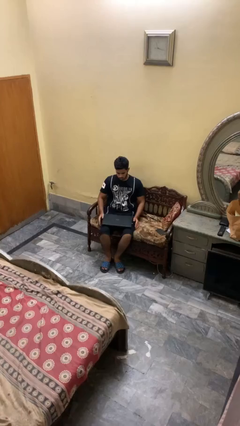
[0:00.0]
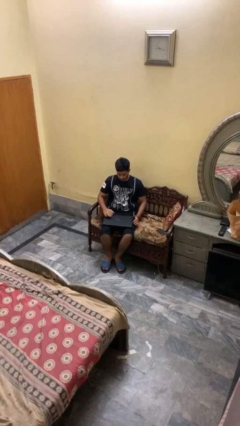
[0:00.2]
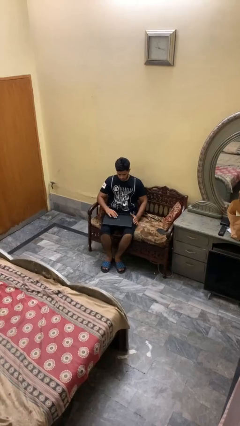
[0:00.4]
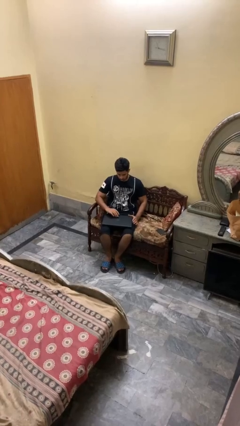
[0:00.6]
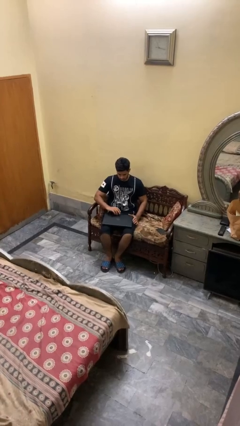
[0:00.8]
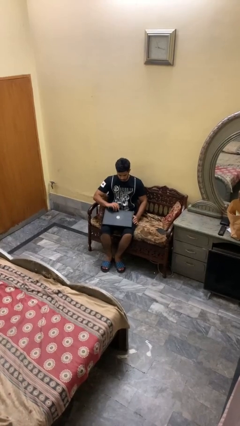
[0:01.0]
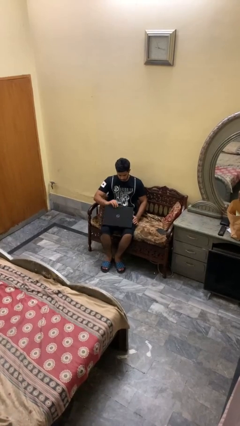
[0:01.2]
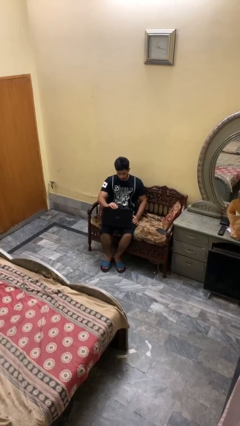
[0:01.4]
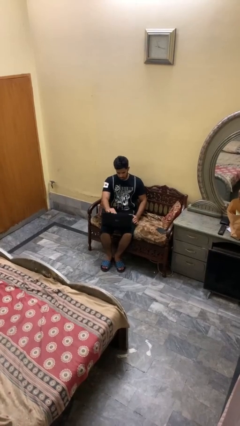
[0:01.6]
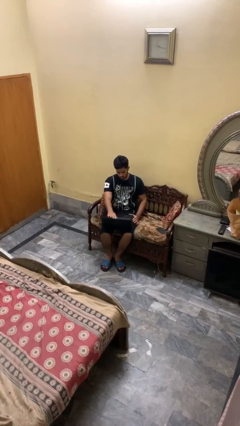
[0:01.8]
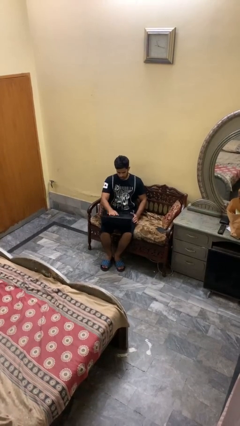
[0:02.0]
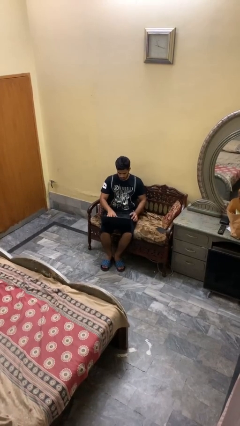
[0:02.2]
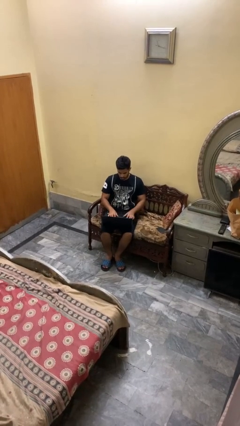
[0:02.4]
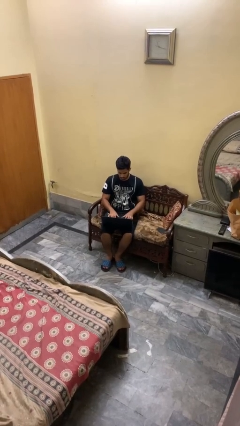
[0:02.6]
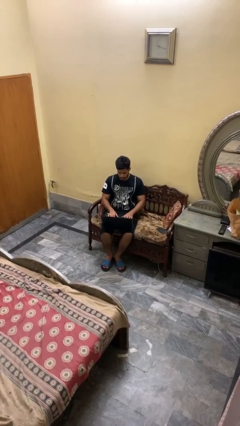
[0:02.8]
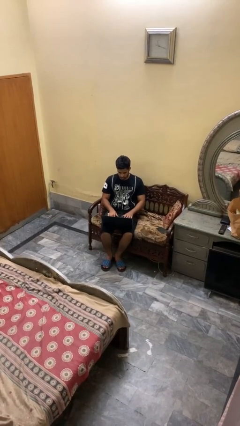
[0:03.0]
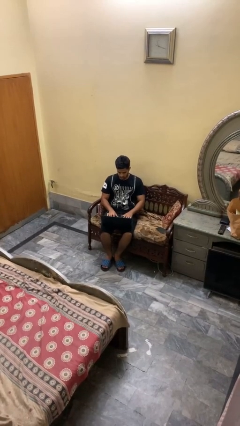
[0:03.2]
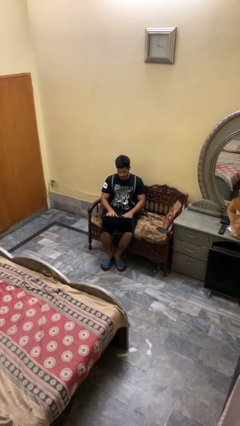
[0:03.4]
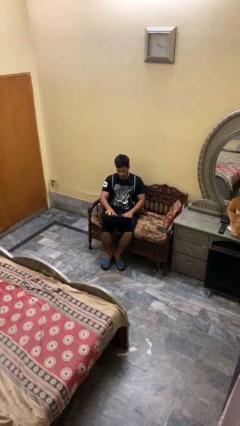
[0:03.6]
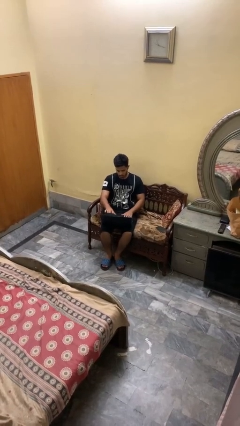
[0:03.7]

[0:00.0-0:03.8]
person opens laptop

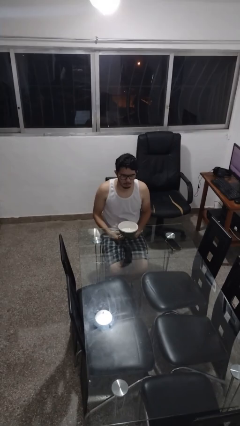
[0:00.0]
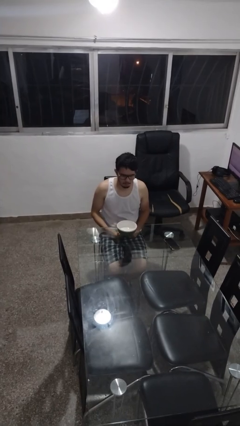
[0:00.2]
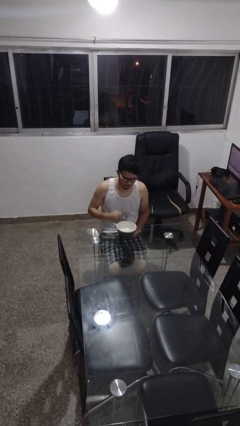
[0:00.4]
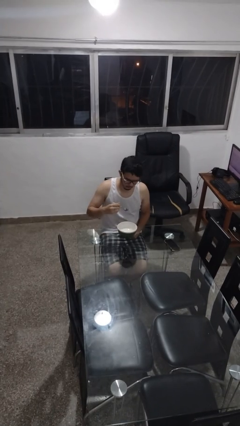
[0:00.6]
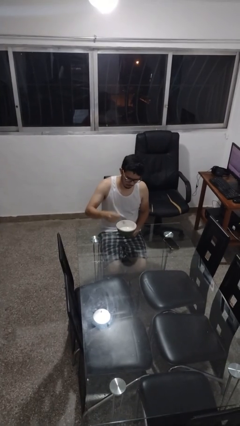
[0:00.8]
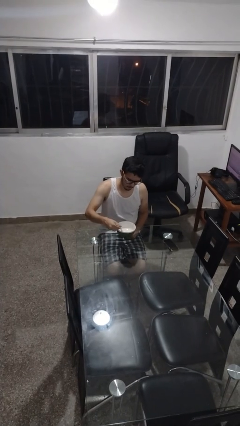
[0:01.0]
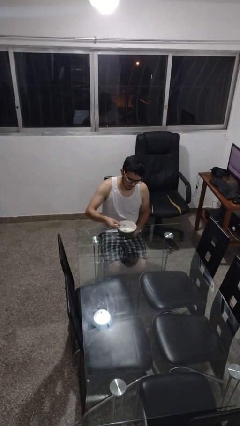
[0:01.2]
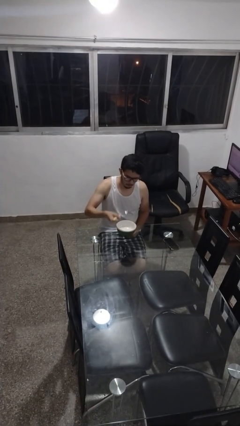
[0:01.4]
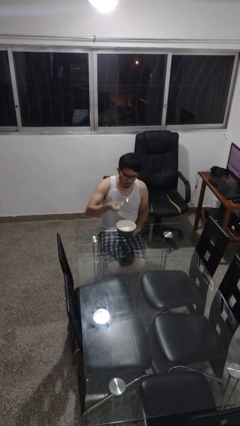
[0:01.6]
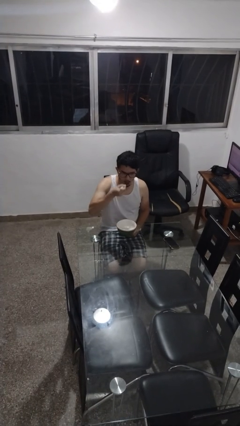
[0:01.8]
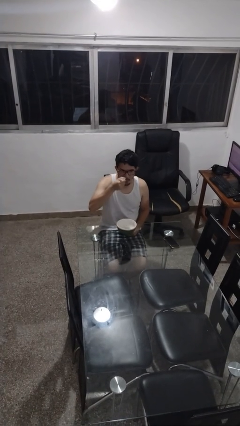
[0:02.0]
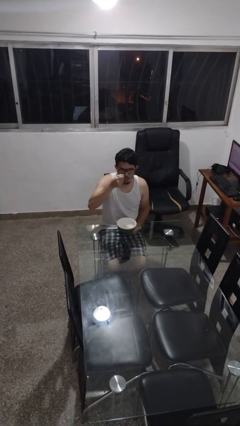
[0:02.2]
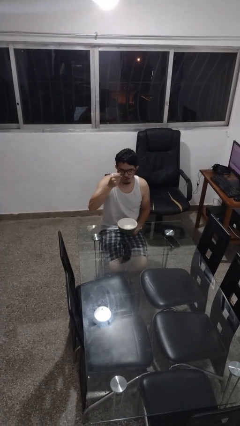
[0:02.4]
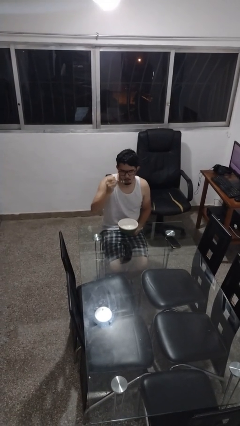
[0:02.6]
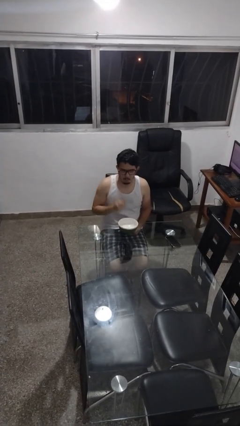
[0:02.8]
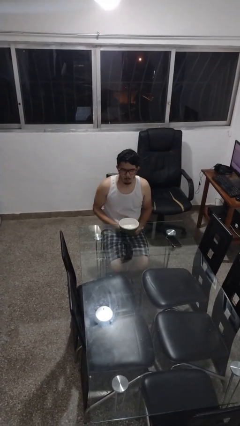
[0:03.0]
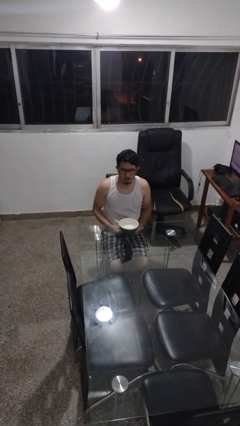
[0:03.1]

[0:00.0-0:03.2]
person eats with utensil

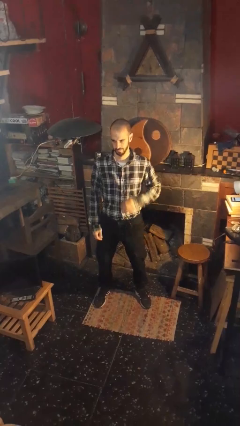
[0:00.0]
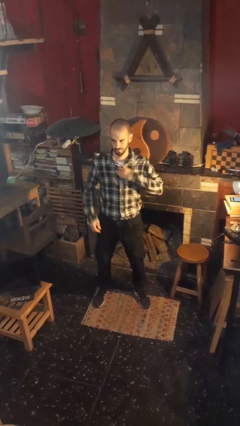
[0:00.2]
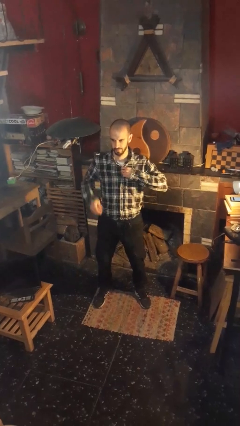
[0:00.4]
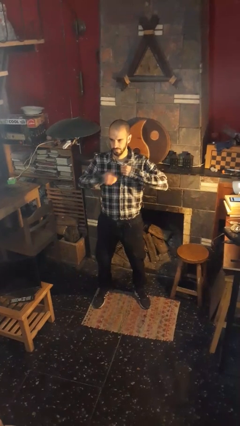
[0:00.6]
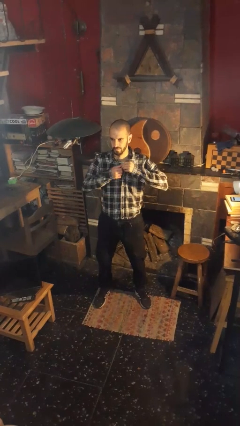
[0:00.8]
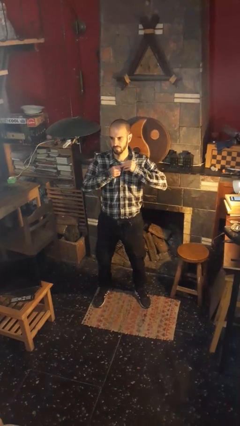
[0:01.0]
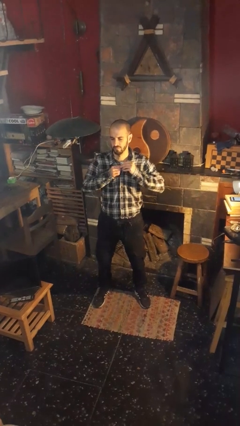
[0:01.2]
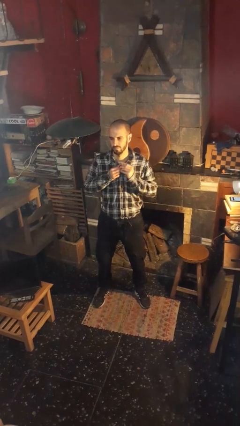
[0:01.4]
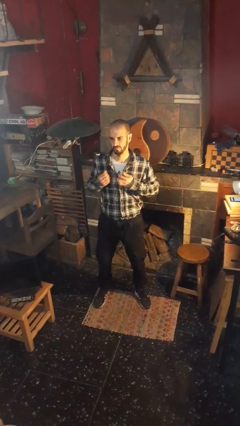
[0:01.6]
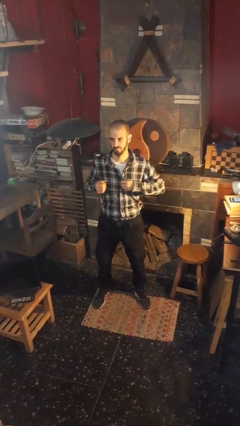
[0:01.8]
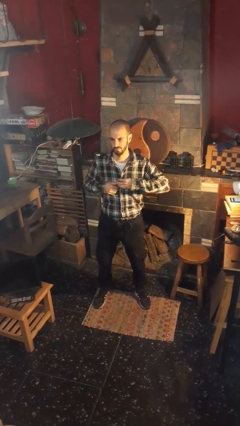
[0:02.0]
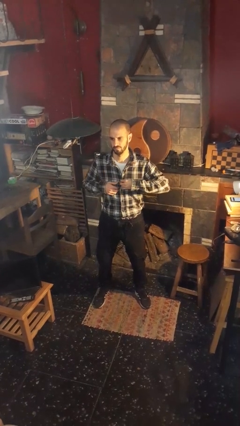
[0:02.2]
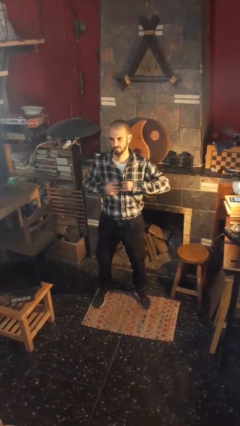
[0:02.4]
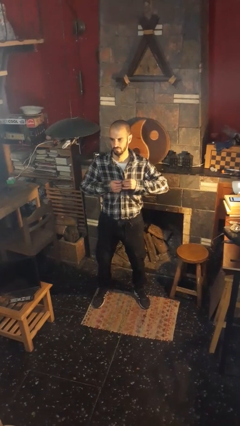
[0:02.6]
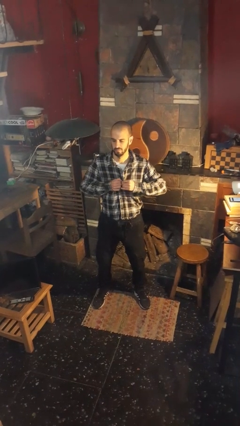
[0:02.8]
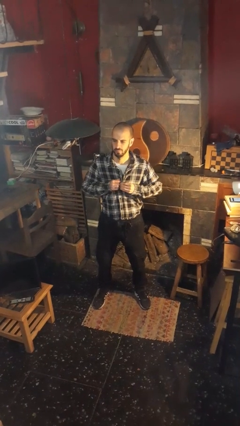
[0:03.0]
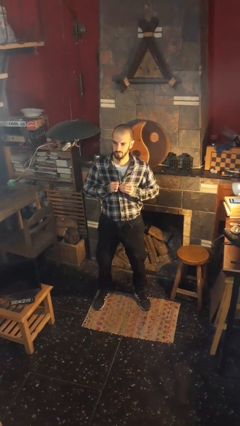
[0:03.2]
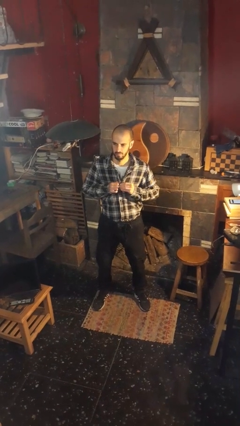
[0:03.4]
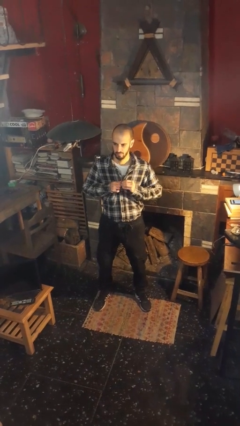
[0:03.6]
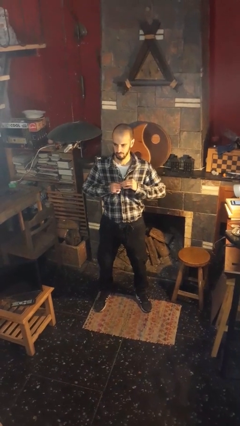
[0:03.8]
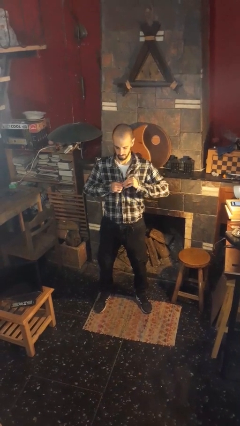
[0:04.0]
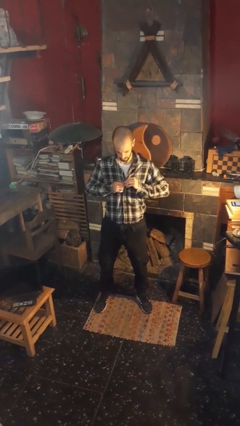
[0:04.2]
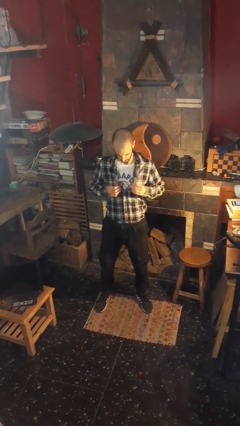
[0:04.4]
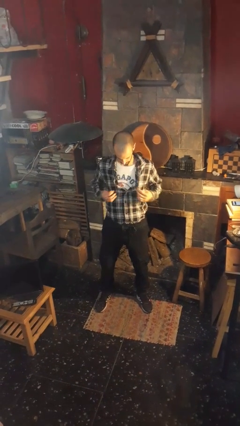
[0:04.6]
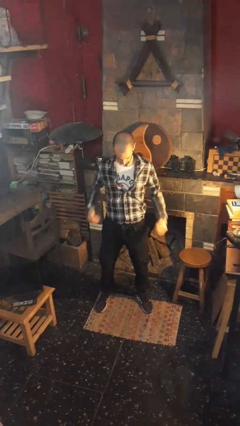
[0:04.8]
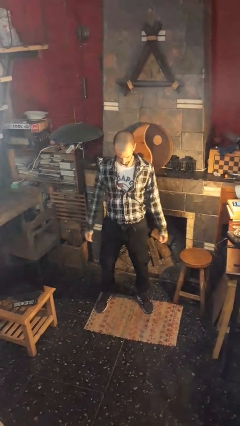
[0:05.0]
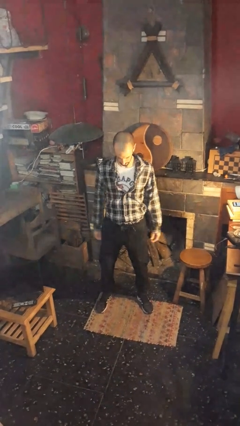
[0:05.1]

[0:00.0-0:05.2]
person unbuttons shirt

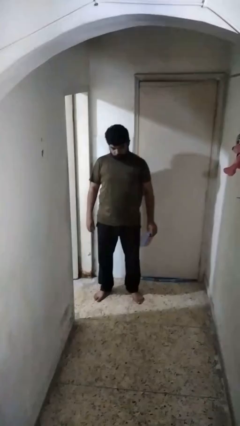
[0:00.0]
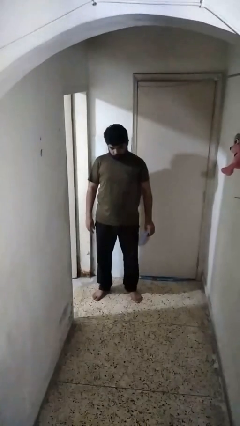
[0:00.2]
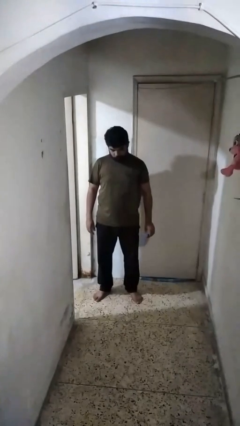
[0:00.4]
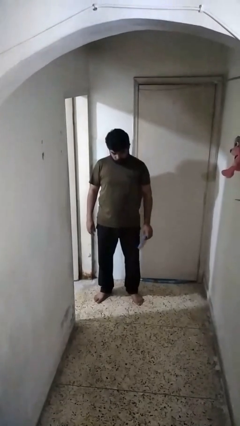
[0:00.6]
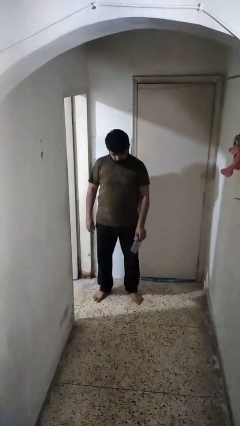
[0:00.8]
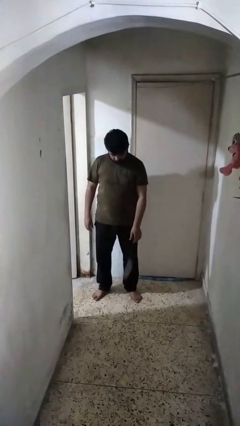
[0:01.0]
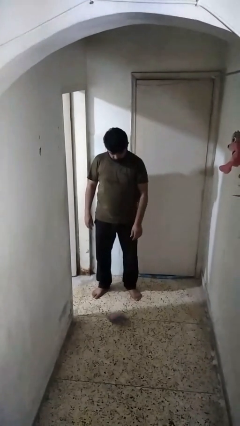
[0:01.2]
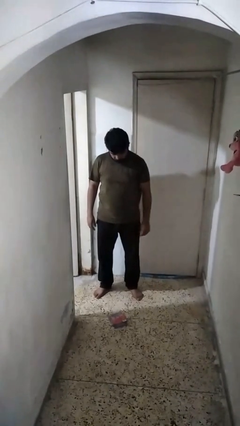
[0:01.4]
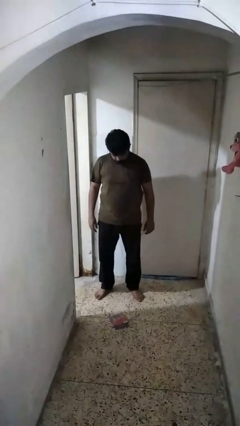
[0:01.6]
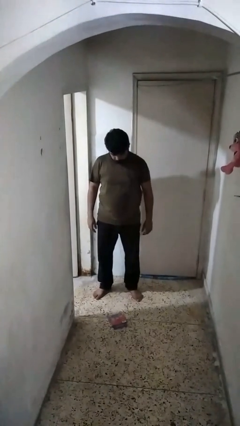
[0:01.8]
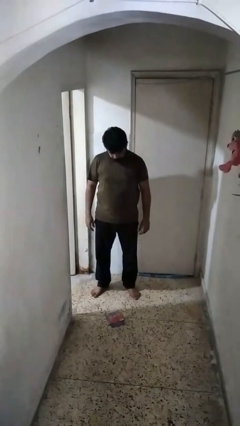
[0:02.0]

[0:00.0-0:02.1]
person throws object to ground

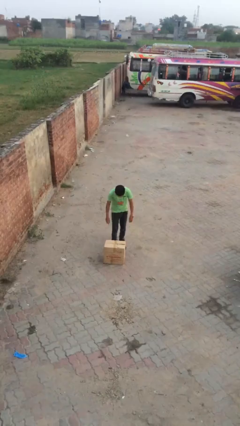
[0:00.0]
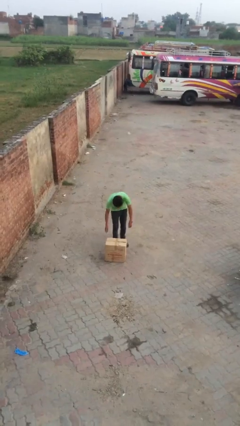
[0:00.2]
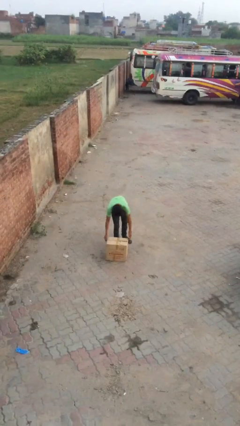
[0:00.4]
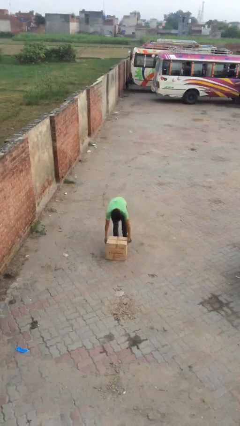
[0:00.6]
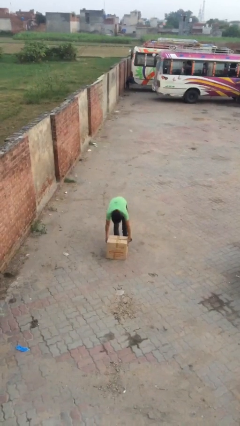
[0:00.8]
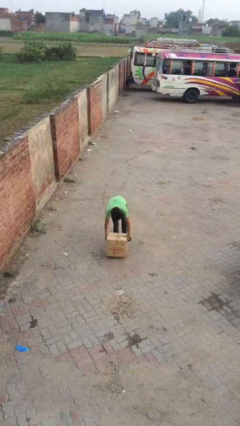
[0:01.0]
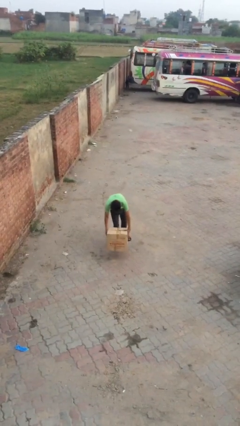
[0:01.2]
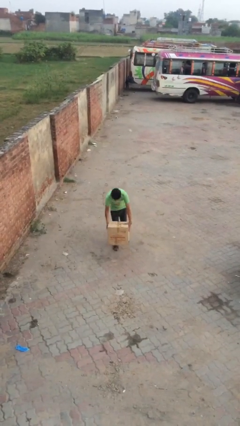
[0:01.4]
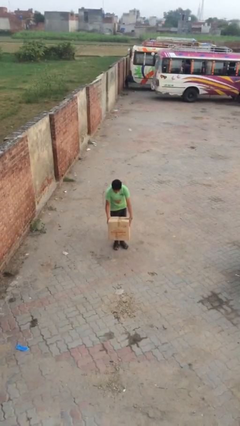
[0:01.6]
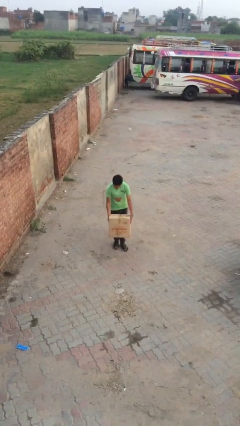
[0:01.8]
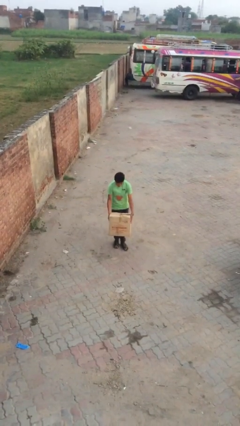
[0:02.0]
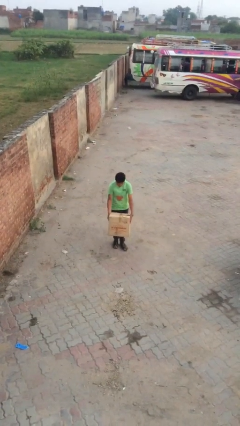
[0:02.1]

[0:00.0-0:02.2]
person picks up object from floor

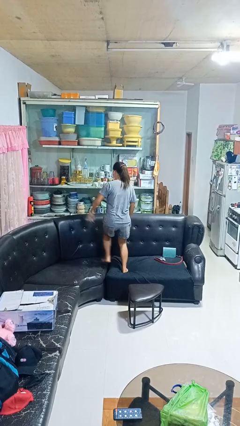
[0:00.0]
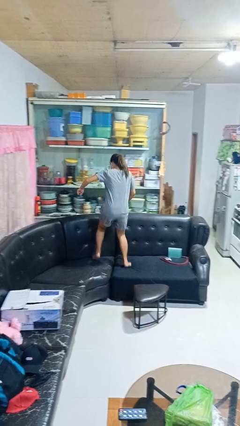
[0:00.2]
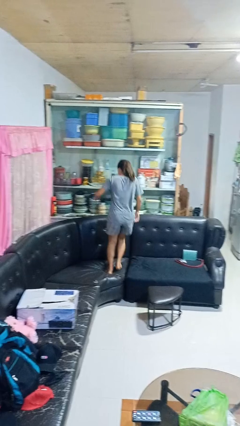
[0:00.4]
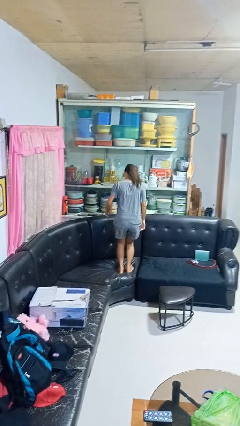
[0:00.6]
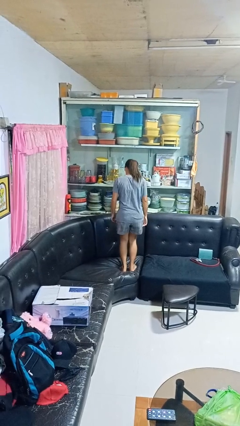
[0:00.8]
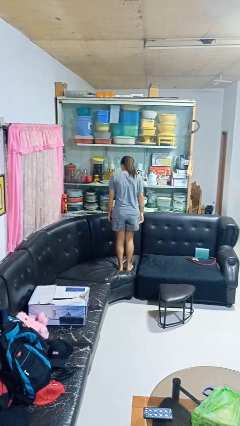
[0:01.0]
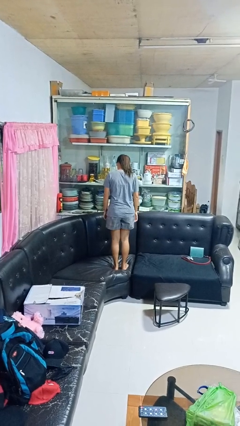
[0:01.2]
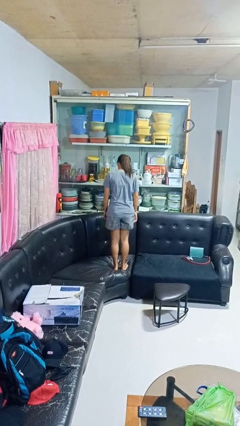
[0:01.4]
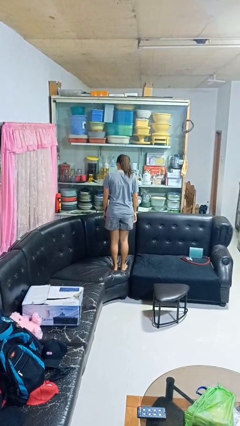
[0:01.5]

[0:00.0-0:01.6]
person jumps on couch
